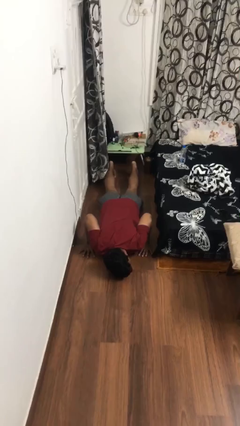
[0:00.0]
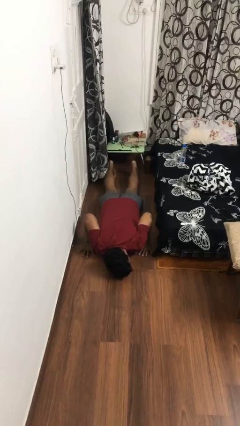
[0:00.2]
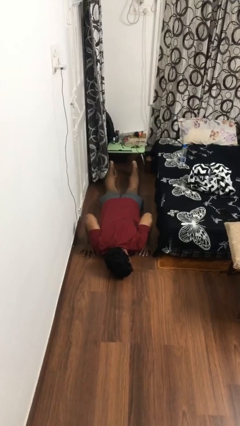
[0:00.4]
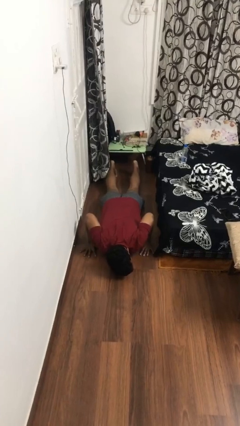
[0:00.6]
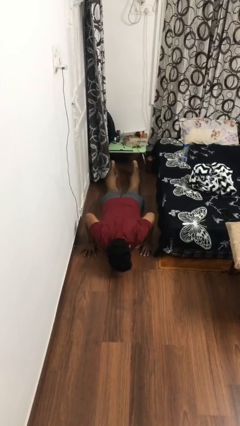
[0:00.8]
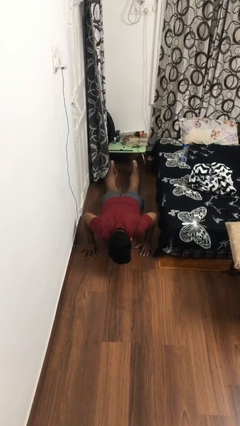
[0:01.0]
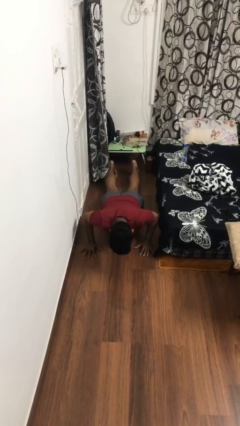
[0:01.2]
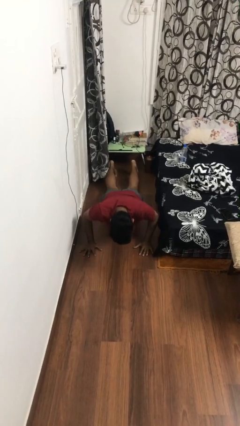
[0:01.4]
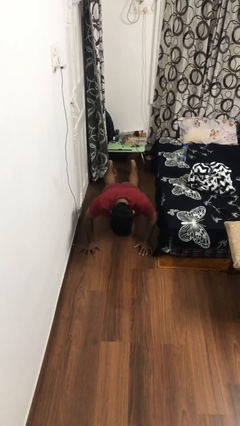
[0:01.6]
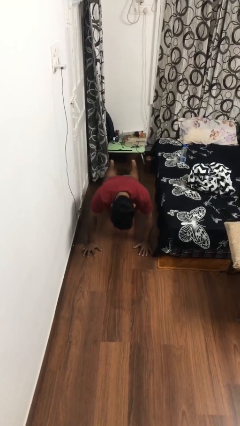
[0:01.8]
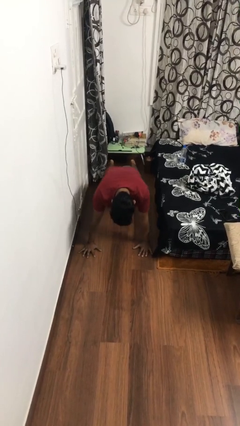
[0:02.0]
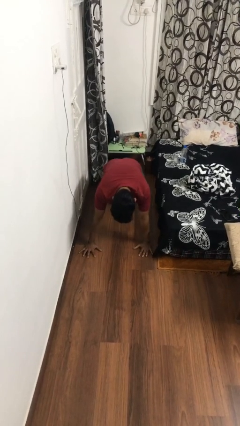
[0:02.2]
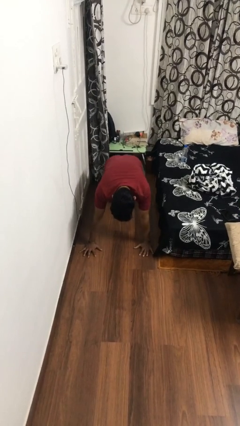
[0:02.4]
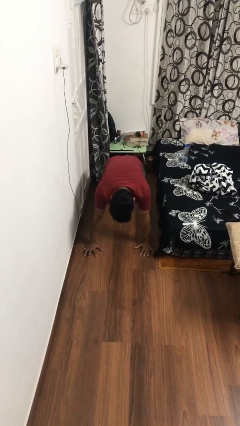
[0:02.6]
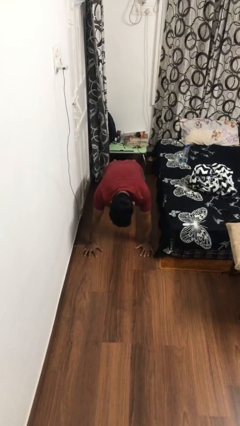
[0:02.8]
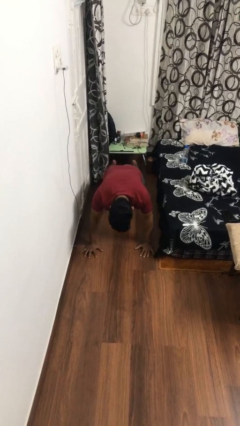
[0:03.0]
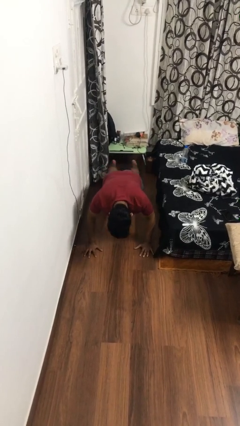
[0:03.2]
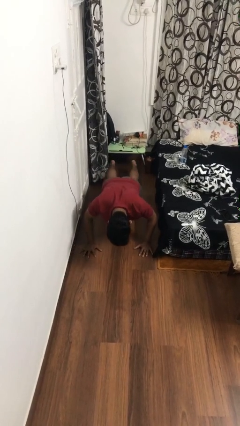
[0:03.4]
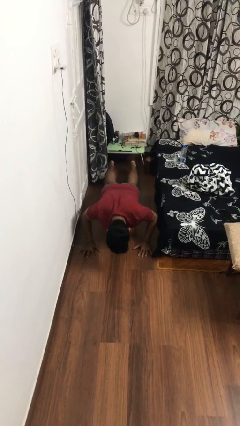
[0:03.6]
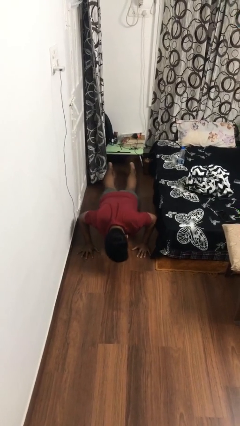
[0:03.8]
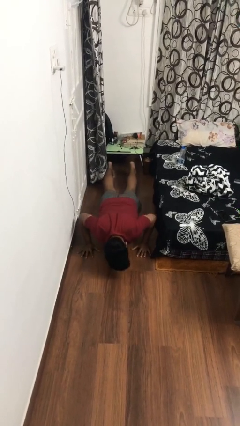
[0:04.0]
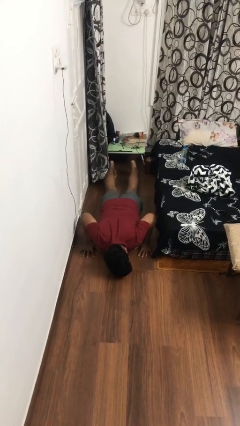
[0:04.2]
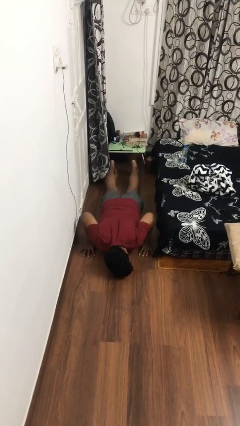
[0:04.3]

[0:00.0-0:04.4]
person exercises with pushup

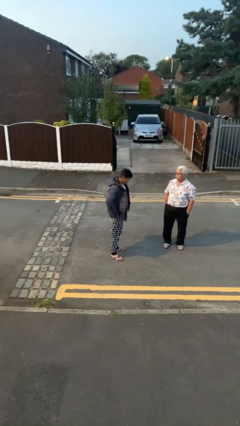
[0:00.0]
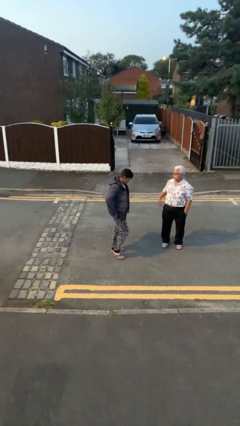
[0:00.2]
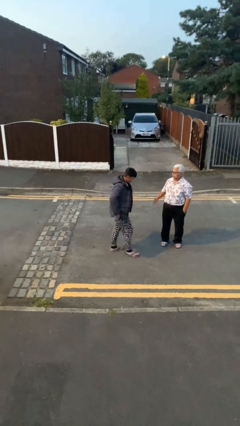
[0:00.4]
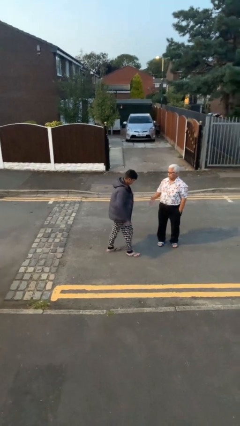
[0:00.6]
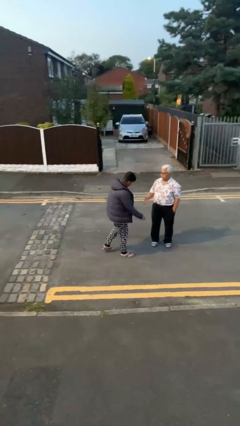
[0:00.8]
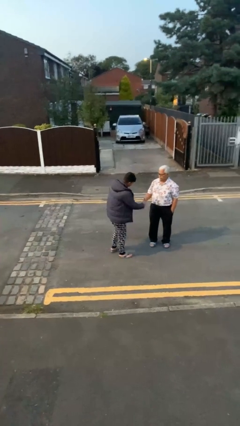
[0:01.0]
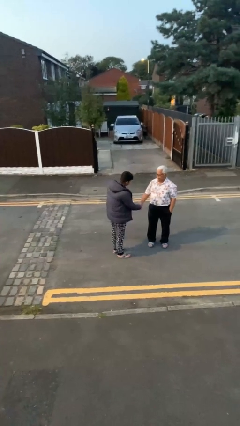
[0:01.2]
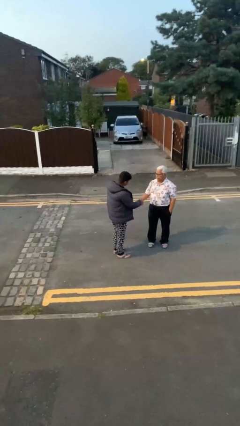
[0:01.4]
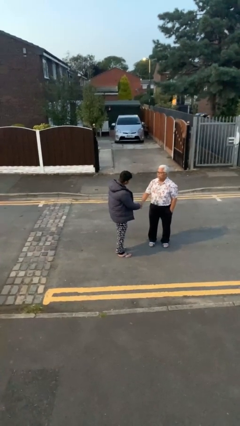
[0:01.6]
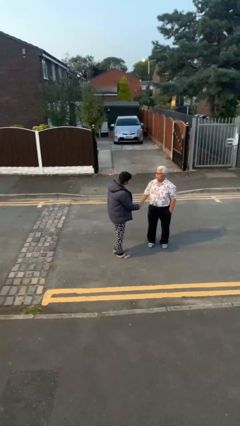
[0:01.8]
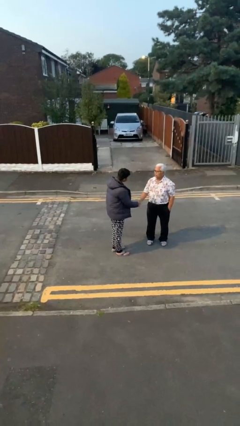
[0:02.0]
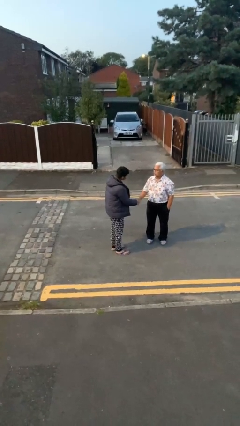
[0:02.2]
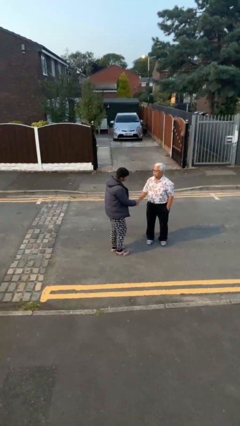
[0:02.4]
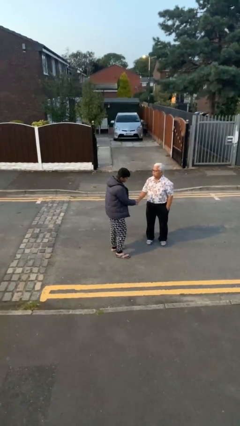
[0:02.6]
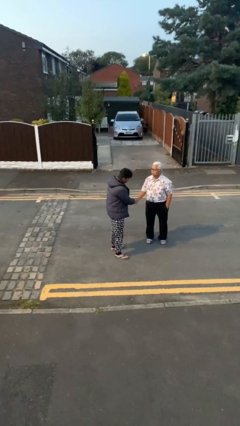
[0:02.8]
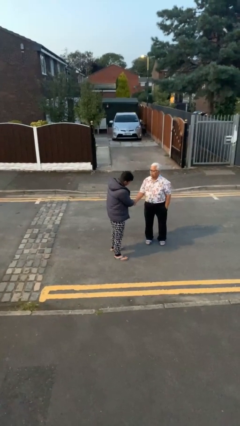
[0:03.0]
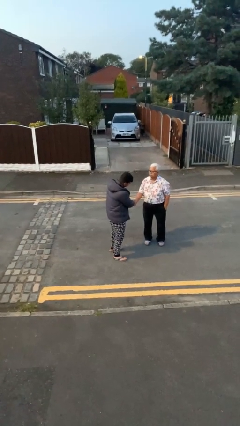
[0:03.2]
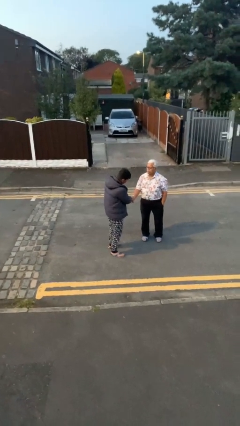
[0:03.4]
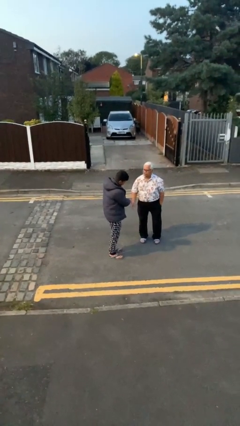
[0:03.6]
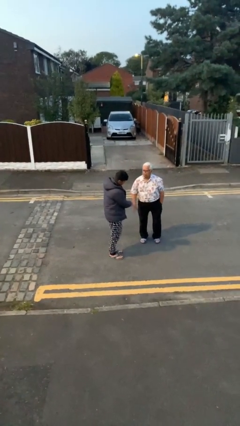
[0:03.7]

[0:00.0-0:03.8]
person shakes hand

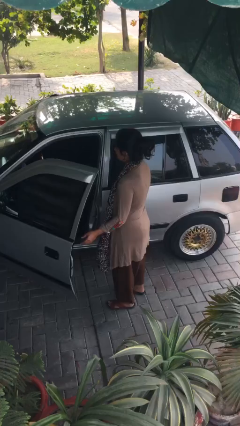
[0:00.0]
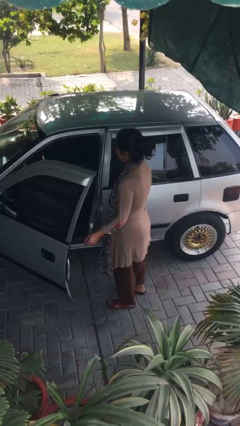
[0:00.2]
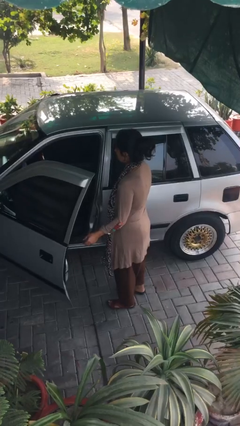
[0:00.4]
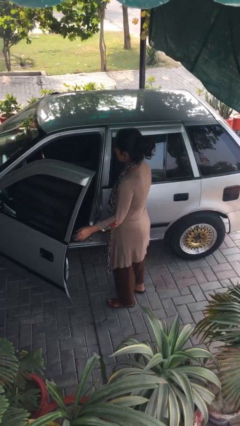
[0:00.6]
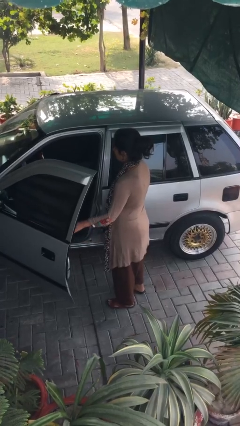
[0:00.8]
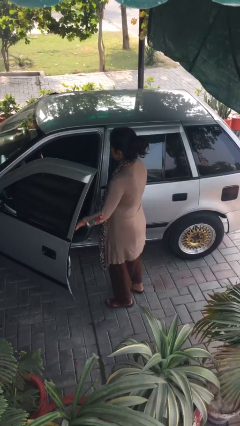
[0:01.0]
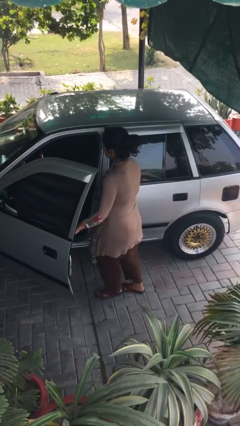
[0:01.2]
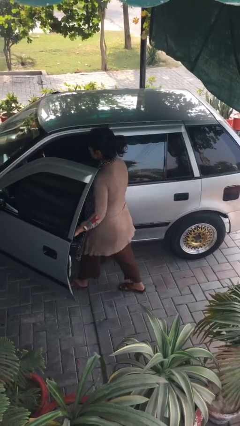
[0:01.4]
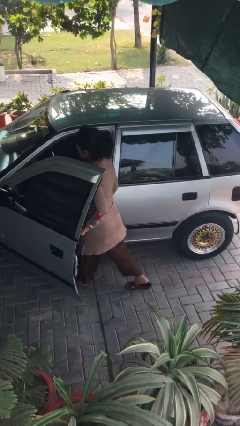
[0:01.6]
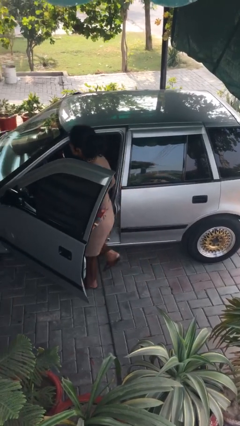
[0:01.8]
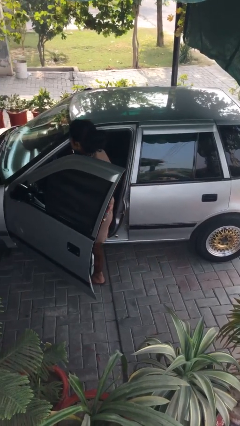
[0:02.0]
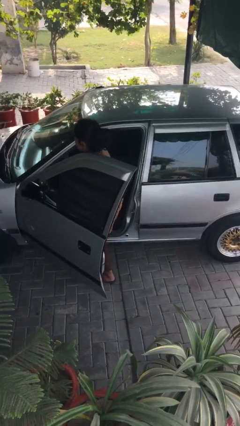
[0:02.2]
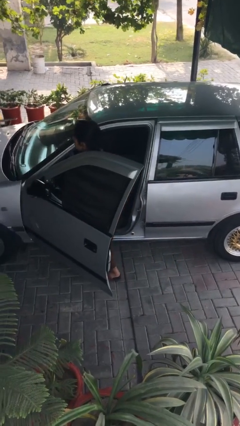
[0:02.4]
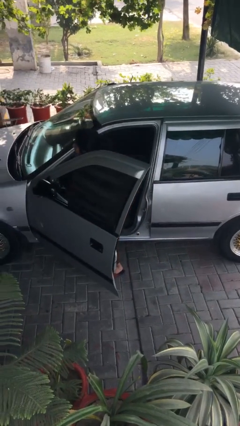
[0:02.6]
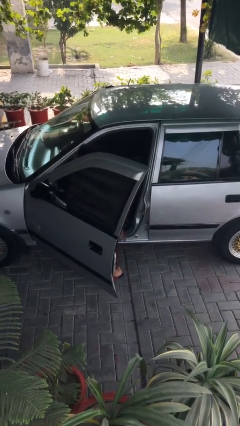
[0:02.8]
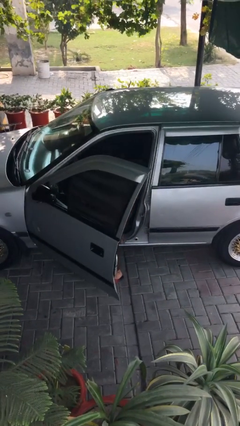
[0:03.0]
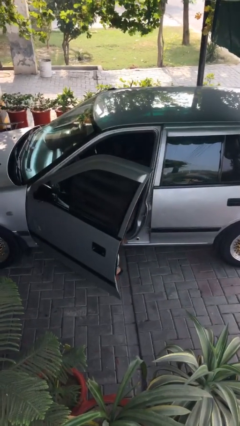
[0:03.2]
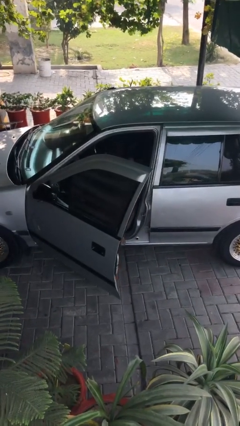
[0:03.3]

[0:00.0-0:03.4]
person enters car

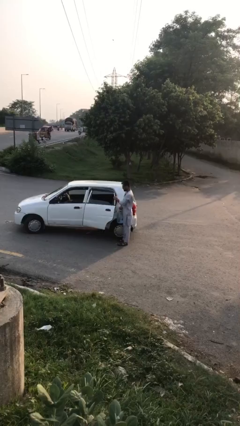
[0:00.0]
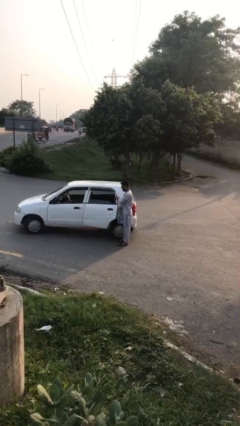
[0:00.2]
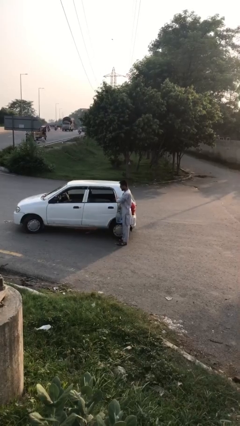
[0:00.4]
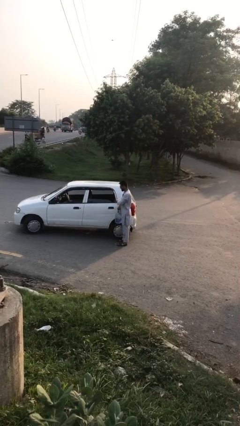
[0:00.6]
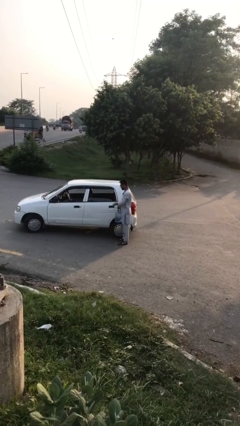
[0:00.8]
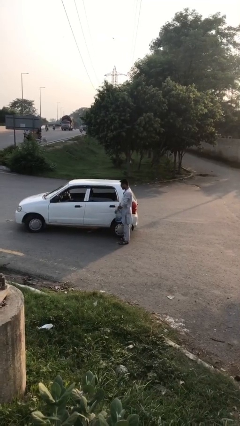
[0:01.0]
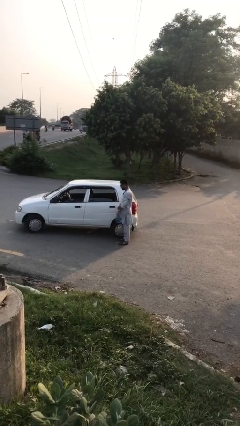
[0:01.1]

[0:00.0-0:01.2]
person closes car door

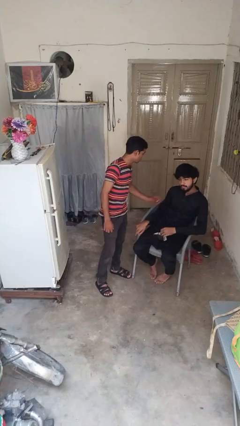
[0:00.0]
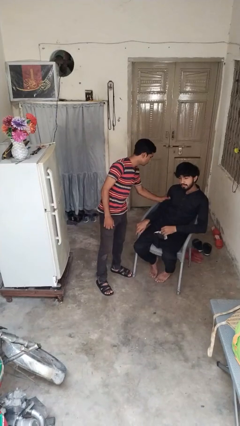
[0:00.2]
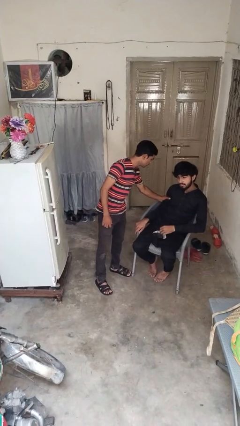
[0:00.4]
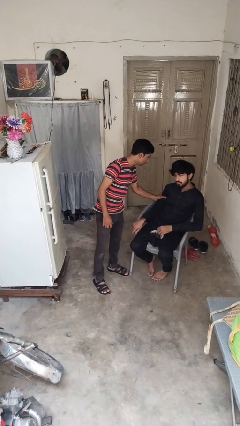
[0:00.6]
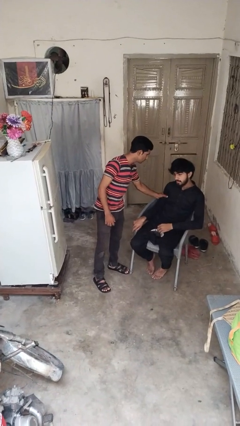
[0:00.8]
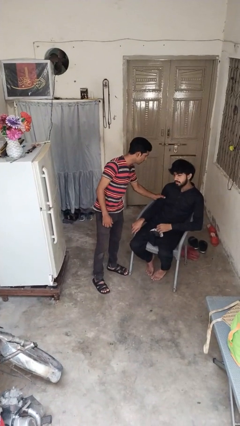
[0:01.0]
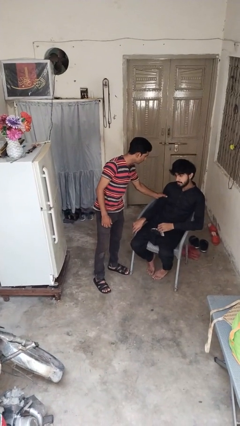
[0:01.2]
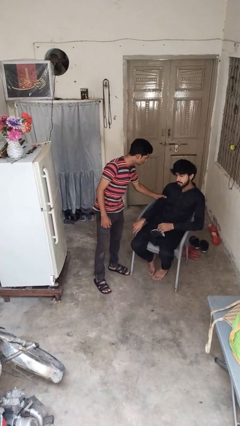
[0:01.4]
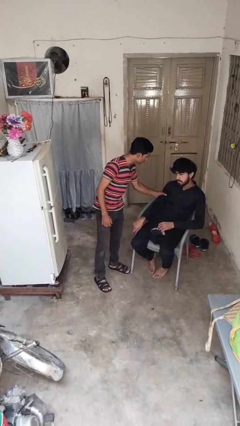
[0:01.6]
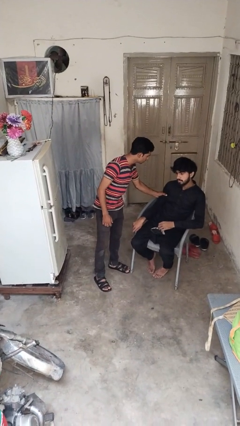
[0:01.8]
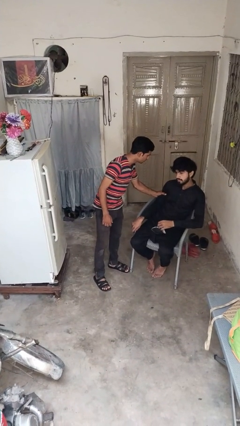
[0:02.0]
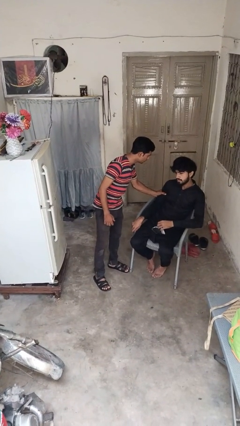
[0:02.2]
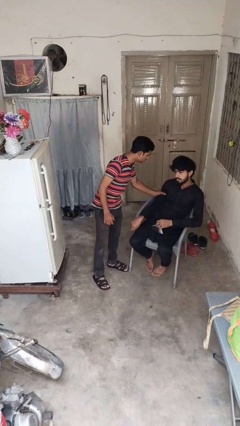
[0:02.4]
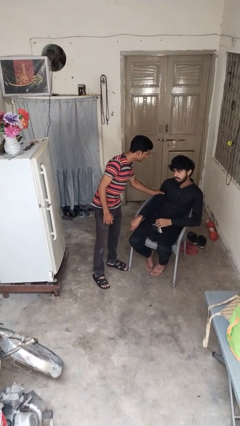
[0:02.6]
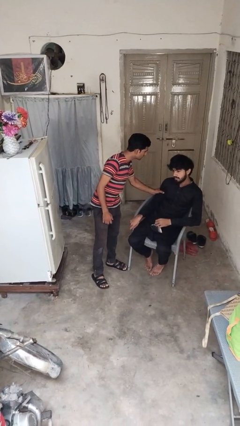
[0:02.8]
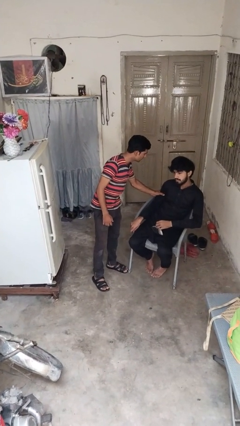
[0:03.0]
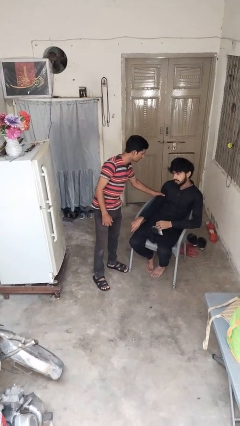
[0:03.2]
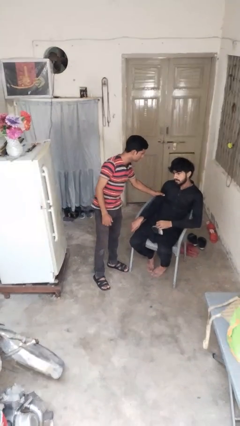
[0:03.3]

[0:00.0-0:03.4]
person grabs person by bicep

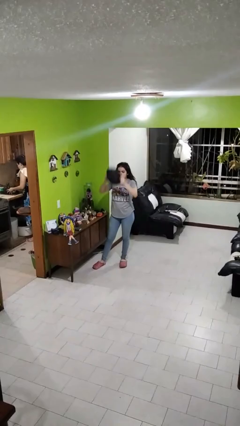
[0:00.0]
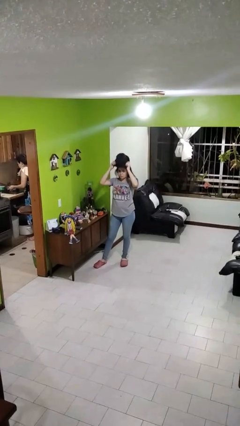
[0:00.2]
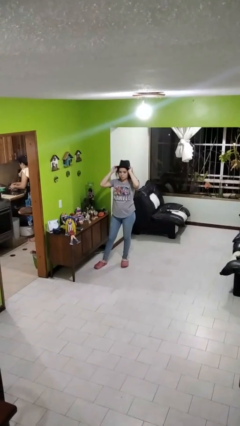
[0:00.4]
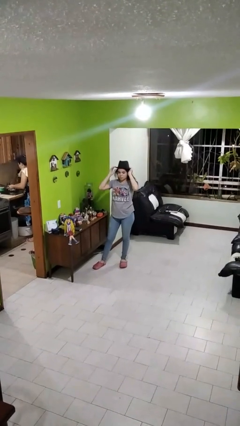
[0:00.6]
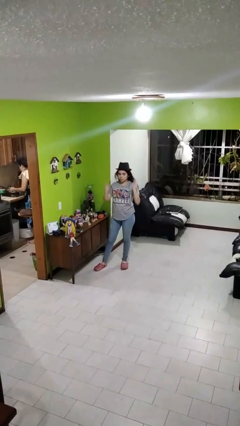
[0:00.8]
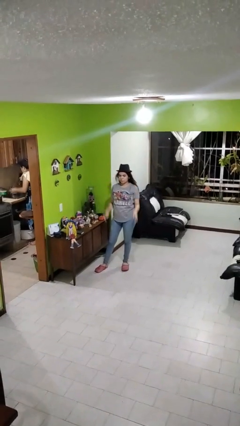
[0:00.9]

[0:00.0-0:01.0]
person puts on hat
